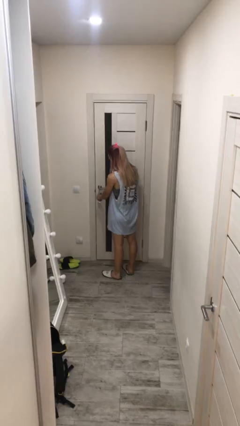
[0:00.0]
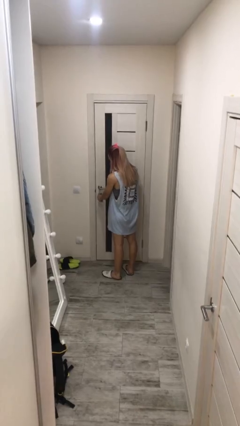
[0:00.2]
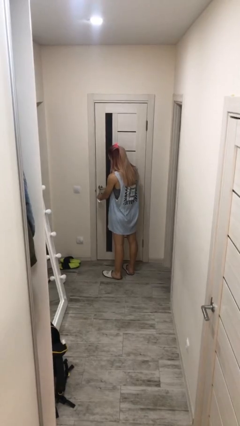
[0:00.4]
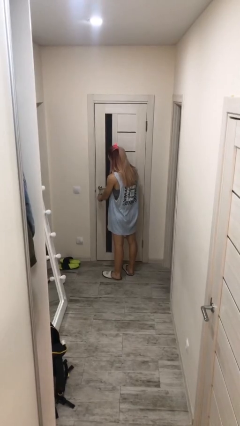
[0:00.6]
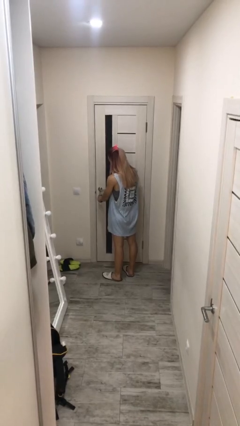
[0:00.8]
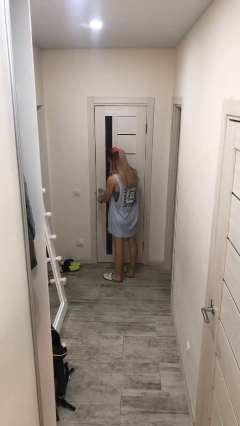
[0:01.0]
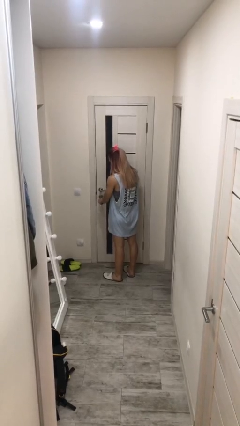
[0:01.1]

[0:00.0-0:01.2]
person locks door with keys

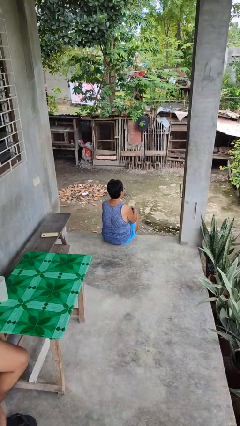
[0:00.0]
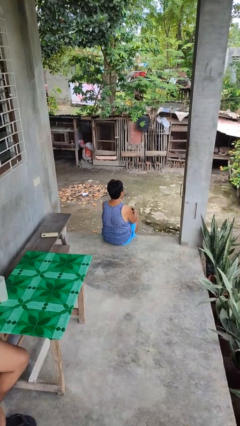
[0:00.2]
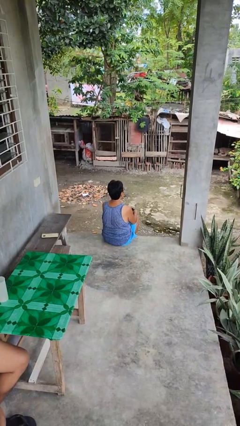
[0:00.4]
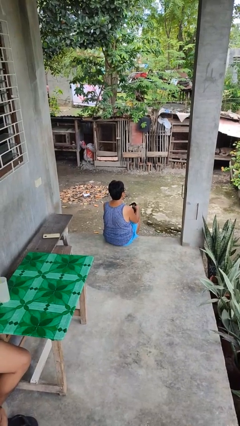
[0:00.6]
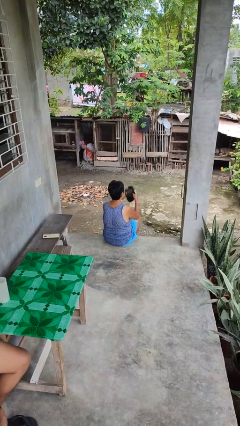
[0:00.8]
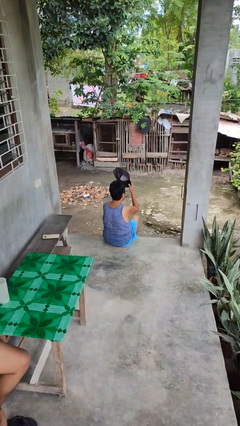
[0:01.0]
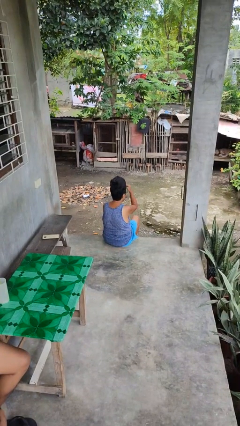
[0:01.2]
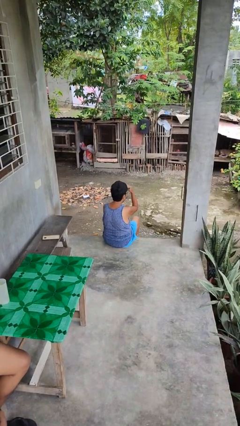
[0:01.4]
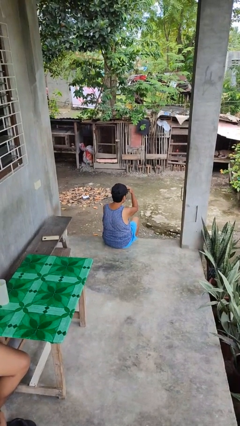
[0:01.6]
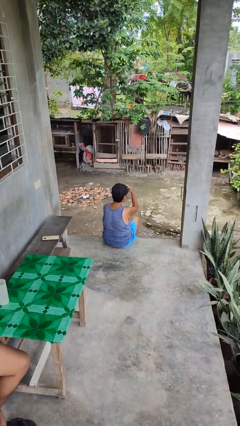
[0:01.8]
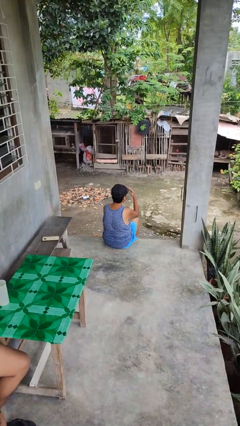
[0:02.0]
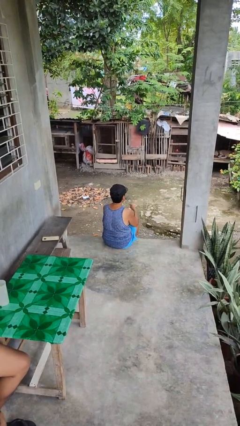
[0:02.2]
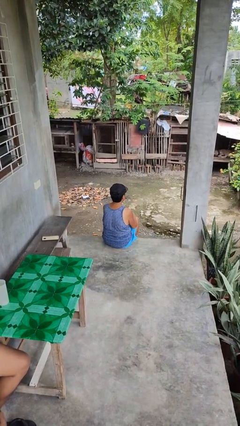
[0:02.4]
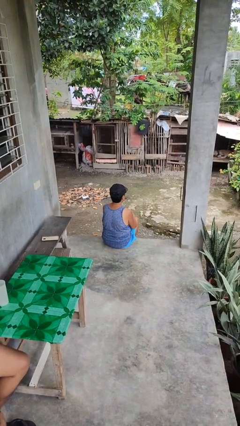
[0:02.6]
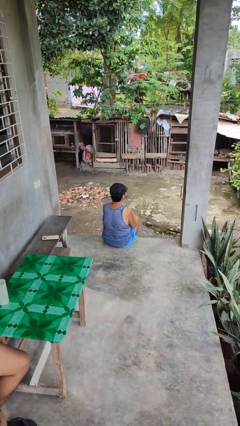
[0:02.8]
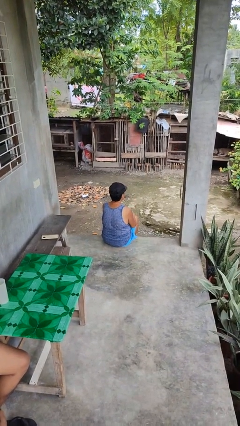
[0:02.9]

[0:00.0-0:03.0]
person puts on hat

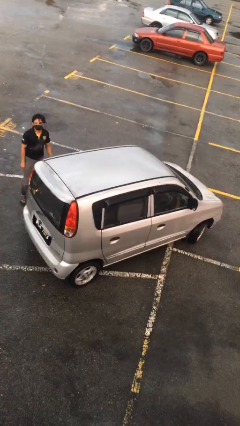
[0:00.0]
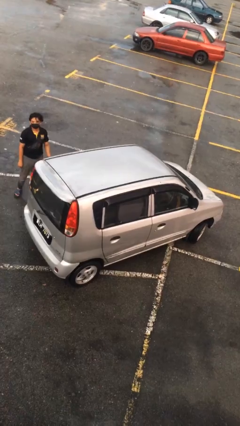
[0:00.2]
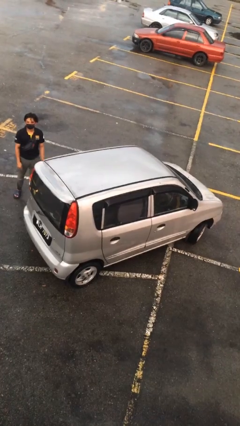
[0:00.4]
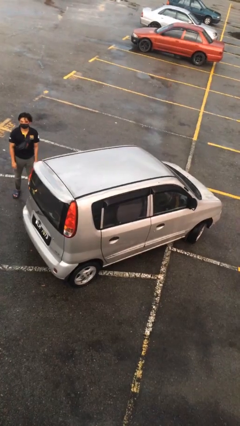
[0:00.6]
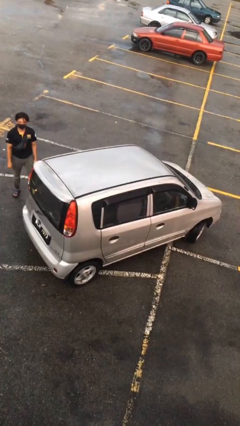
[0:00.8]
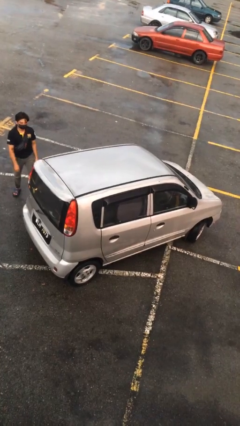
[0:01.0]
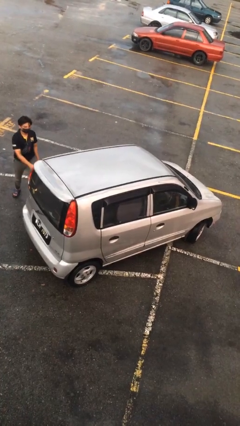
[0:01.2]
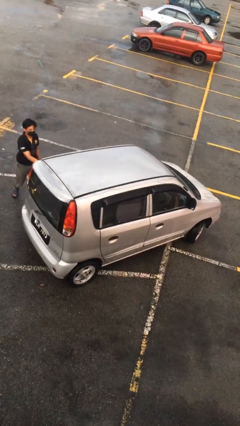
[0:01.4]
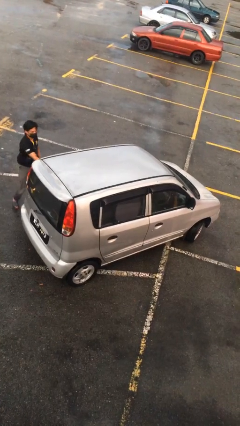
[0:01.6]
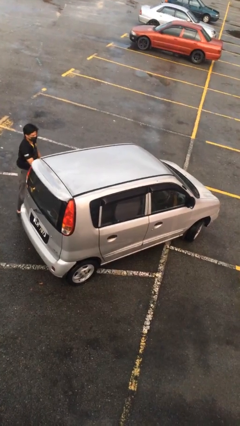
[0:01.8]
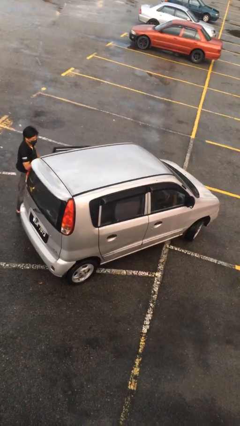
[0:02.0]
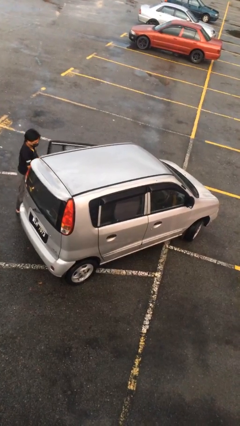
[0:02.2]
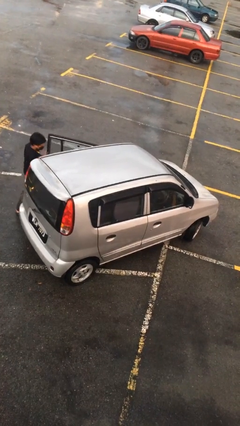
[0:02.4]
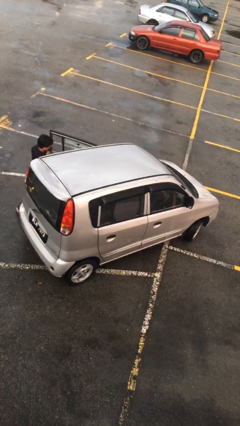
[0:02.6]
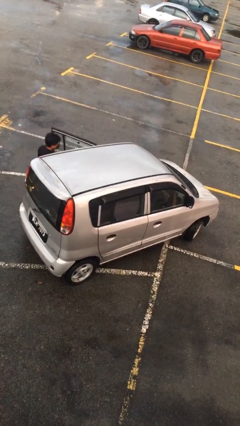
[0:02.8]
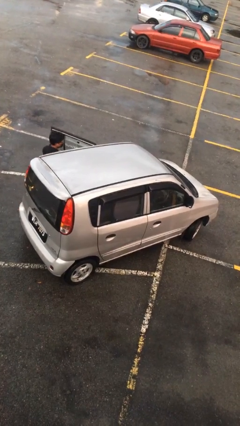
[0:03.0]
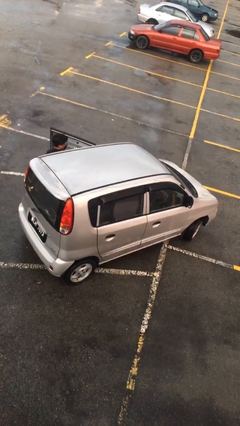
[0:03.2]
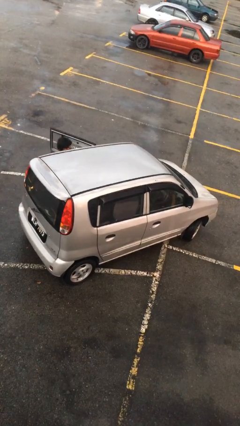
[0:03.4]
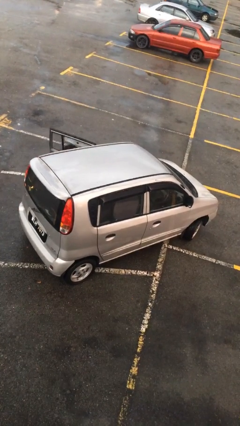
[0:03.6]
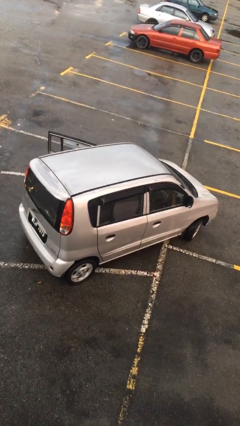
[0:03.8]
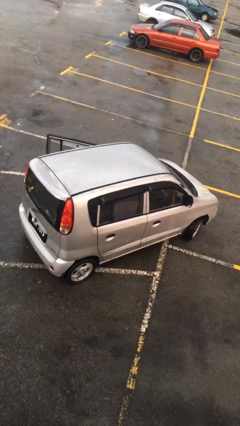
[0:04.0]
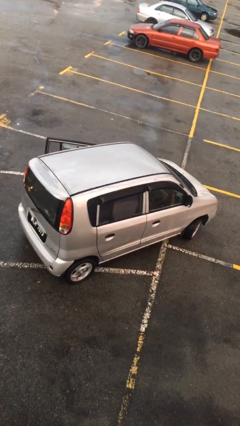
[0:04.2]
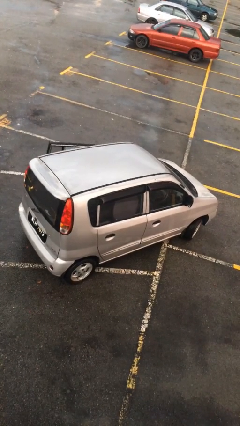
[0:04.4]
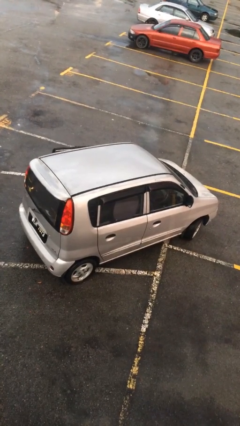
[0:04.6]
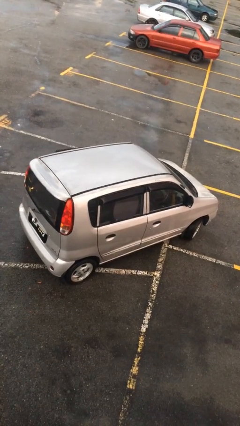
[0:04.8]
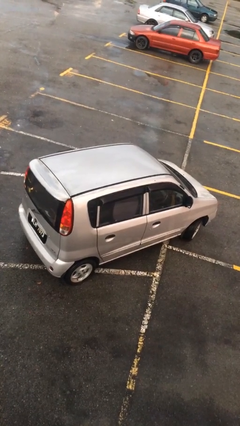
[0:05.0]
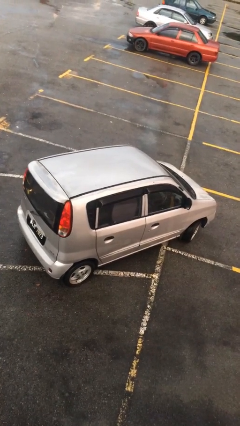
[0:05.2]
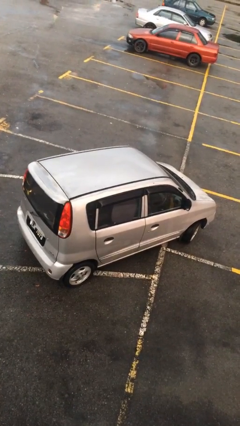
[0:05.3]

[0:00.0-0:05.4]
car picks up person

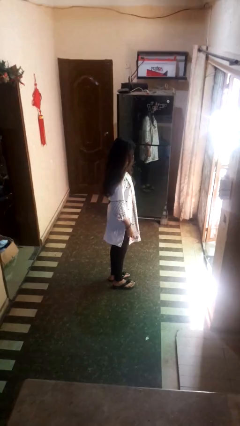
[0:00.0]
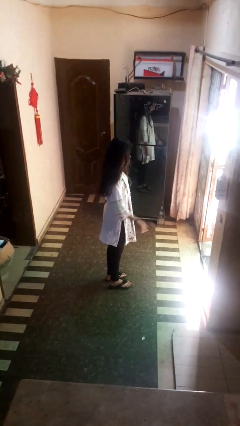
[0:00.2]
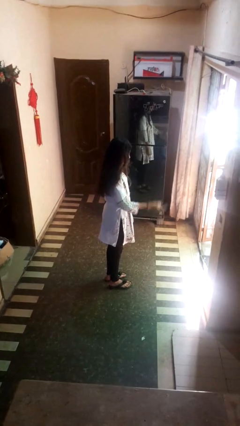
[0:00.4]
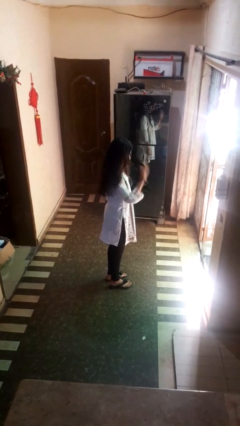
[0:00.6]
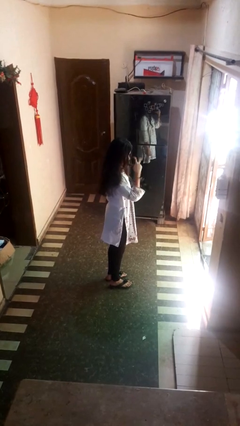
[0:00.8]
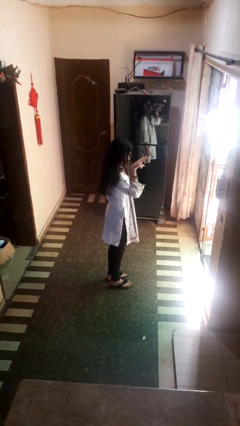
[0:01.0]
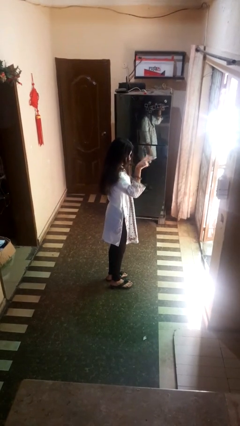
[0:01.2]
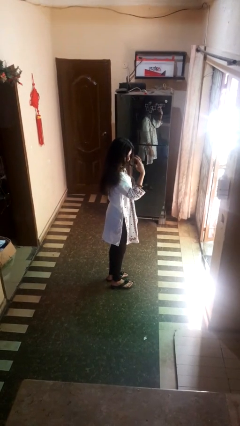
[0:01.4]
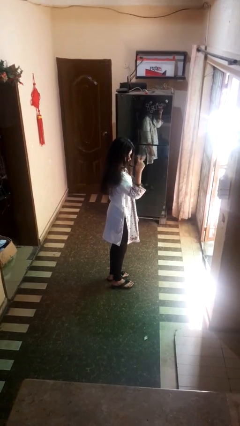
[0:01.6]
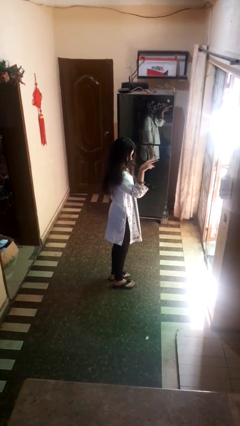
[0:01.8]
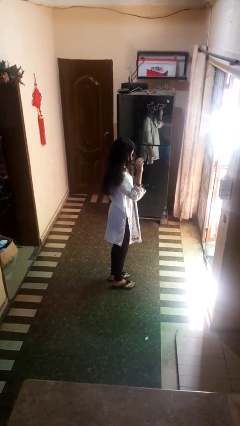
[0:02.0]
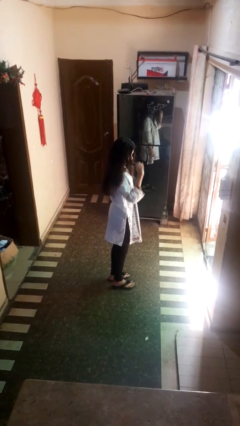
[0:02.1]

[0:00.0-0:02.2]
person gestures watch closely

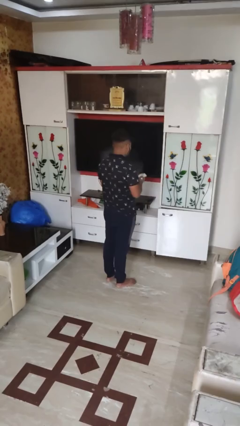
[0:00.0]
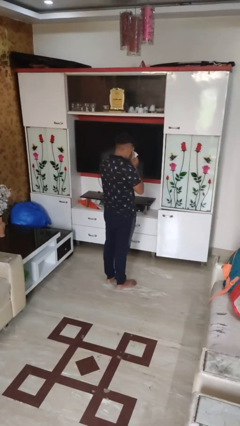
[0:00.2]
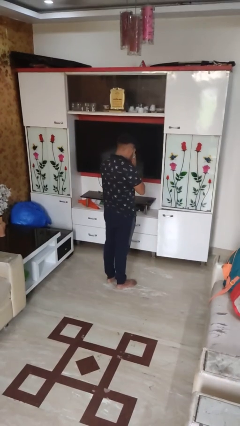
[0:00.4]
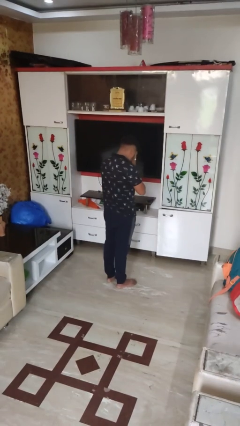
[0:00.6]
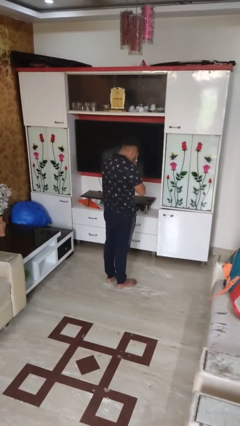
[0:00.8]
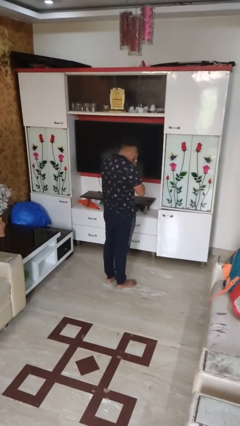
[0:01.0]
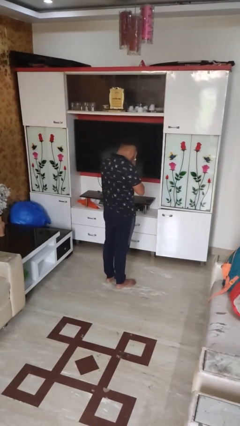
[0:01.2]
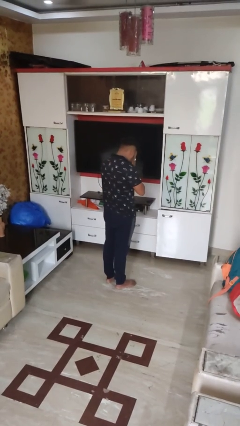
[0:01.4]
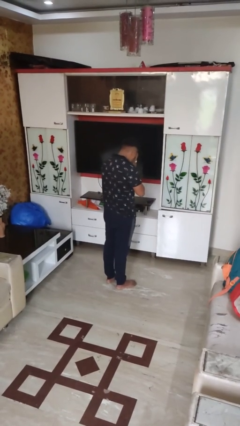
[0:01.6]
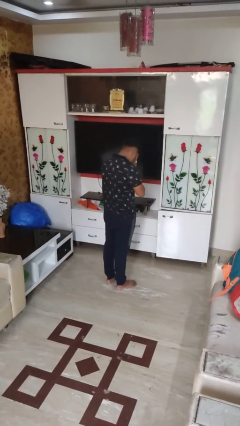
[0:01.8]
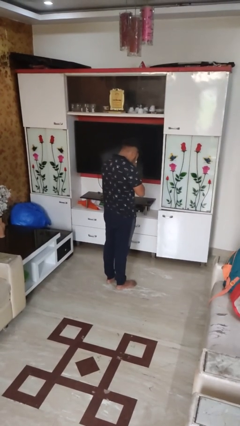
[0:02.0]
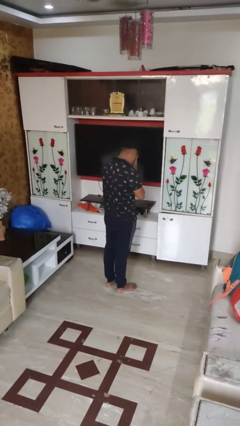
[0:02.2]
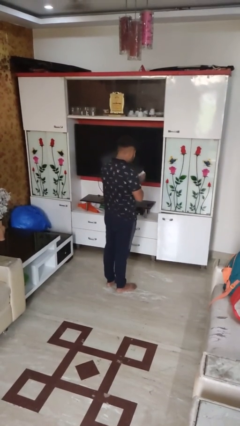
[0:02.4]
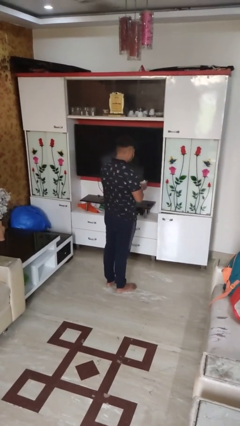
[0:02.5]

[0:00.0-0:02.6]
person blows nose

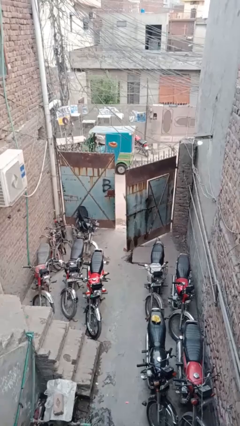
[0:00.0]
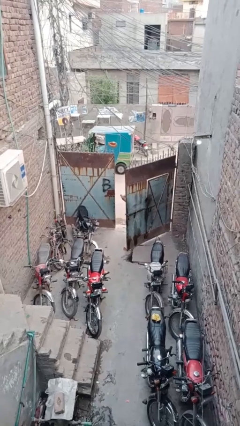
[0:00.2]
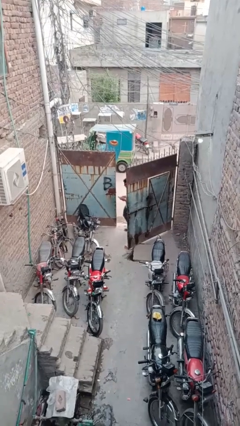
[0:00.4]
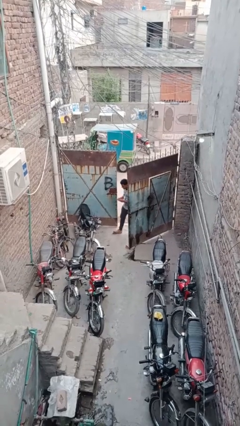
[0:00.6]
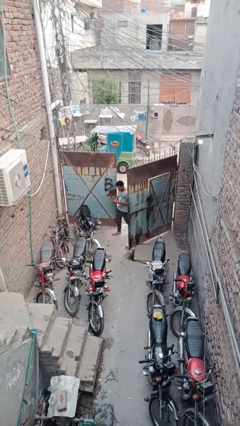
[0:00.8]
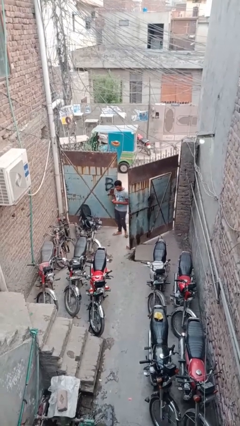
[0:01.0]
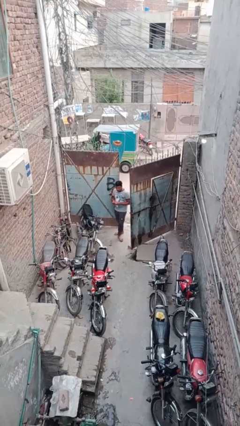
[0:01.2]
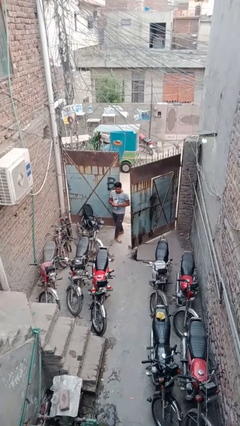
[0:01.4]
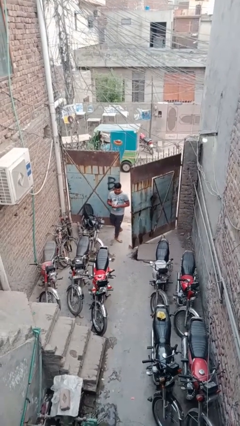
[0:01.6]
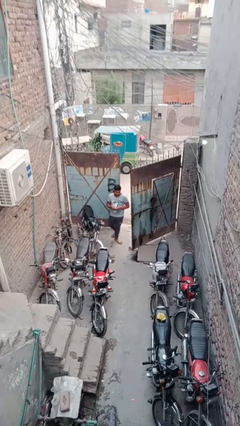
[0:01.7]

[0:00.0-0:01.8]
person enters scene through structure

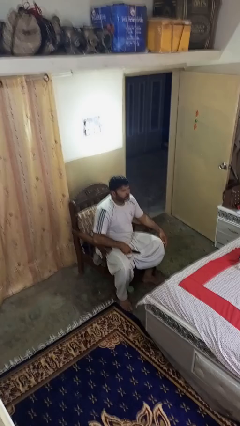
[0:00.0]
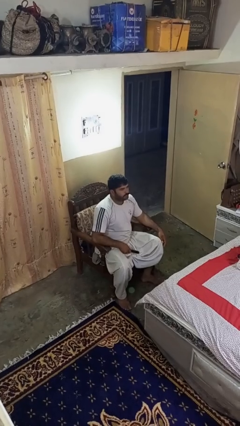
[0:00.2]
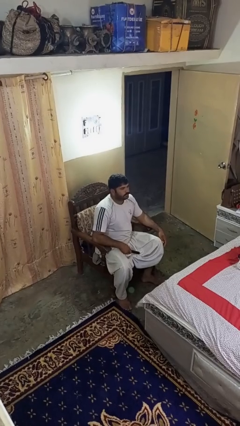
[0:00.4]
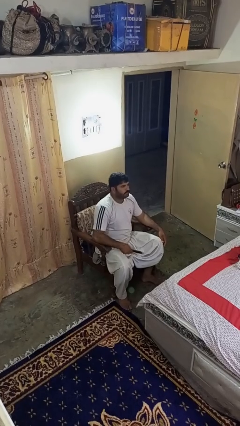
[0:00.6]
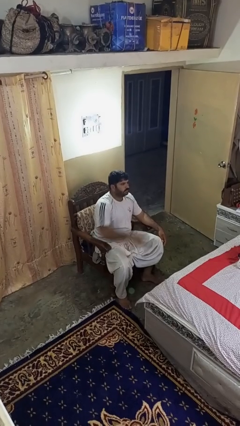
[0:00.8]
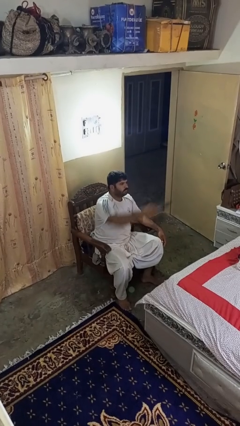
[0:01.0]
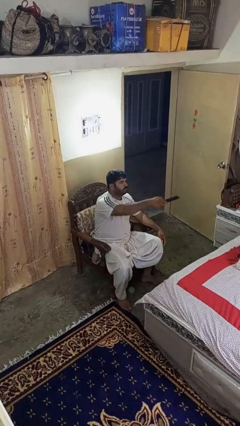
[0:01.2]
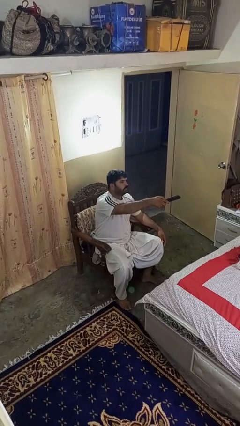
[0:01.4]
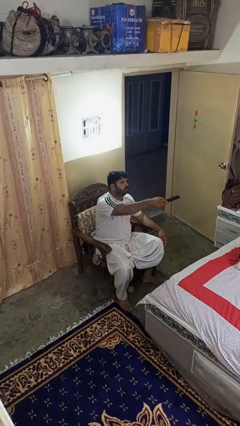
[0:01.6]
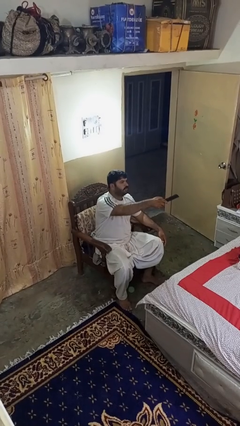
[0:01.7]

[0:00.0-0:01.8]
person uses television remote
